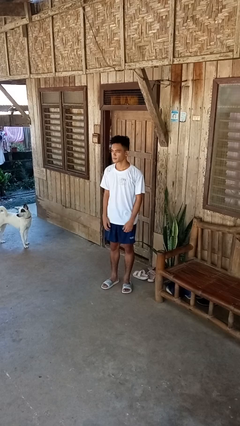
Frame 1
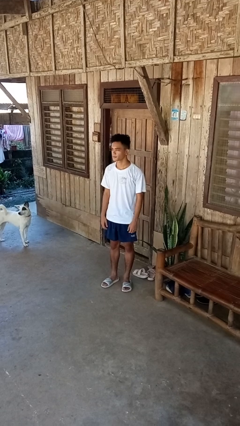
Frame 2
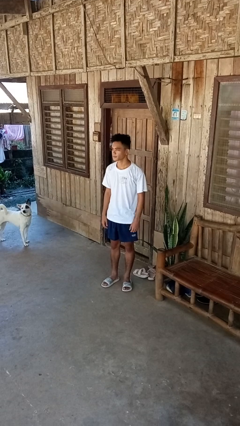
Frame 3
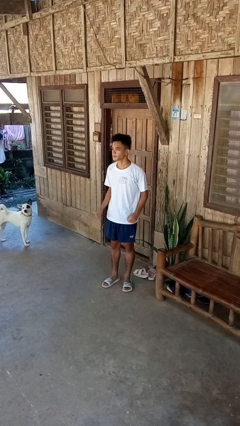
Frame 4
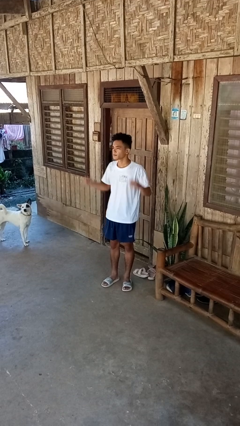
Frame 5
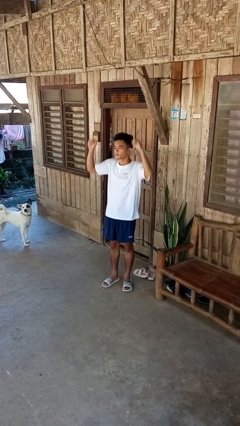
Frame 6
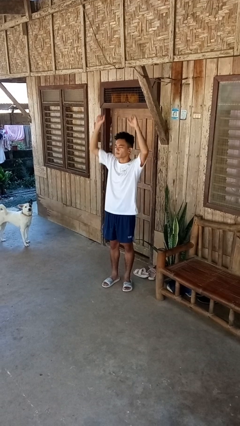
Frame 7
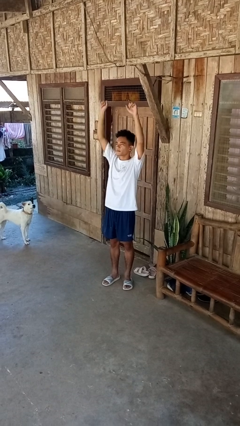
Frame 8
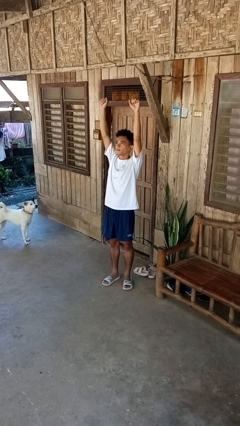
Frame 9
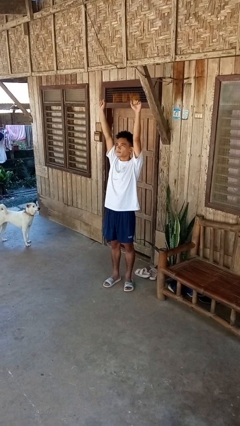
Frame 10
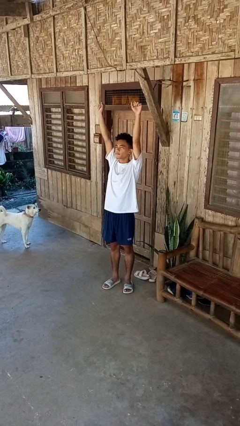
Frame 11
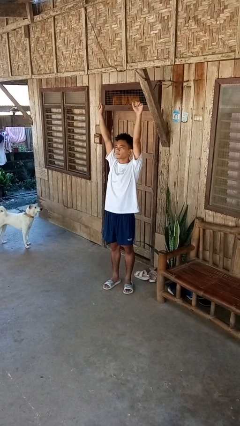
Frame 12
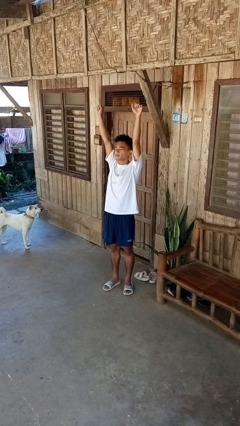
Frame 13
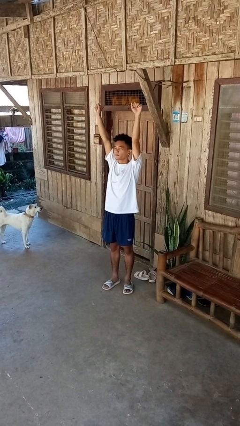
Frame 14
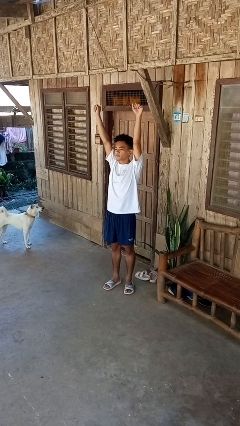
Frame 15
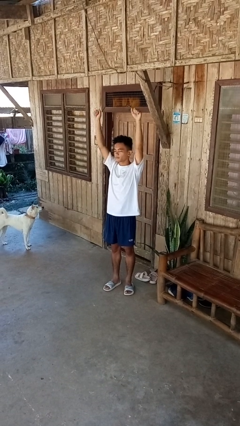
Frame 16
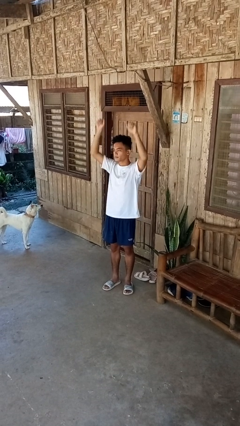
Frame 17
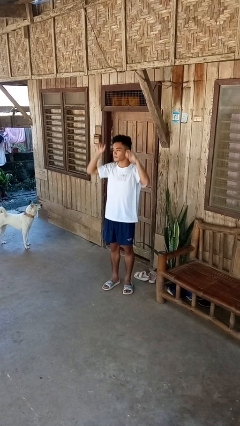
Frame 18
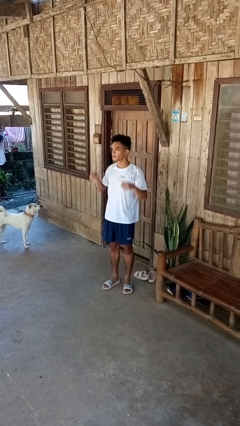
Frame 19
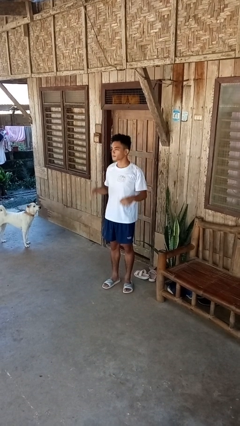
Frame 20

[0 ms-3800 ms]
person stretches arms over head

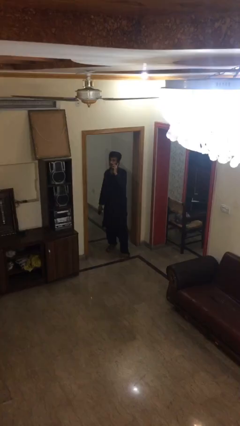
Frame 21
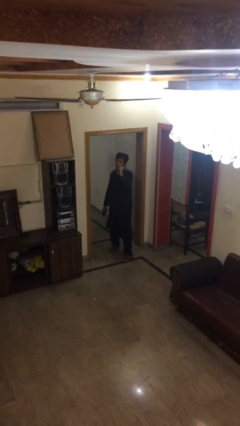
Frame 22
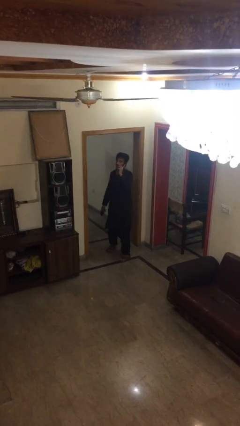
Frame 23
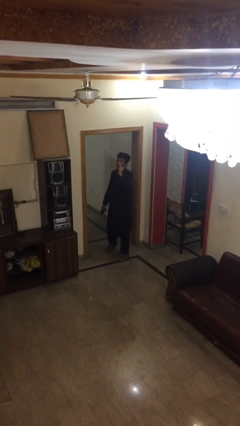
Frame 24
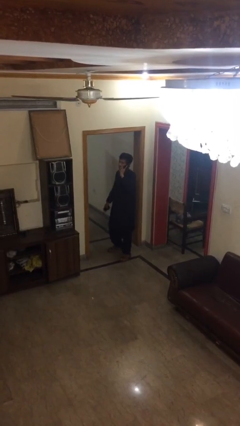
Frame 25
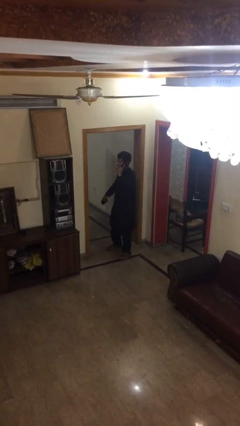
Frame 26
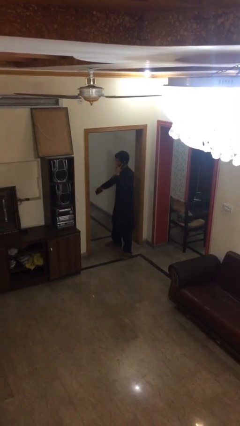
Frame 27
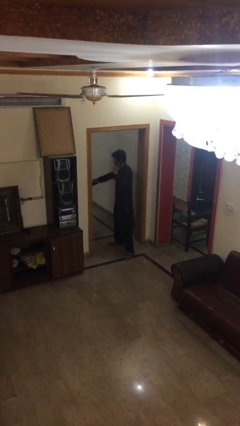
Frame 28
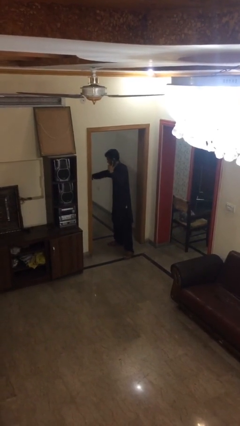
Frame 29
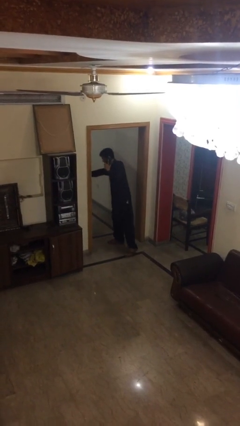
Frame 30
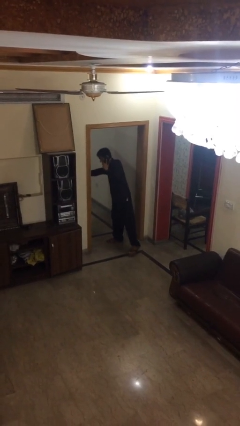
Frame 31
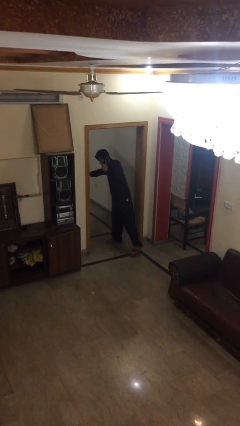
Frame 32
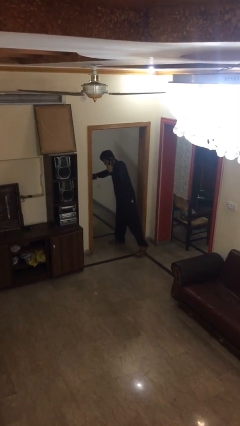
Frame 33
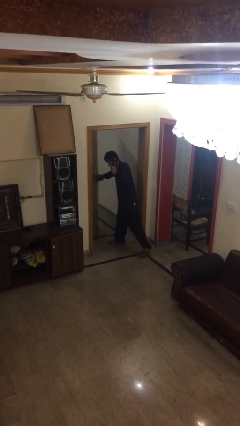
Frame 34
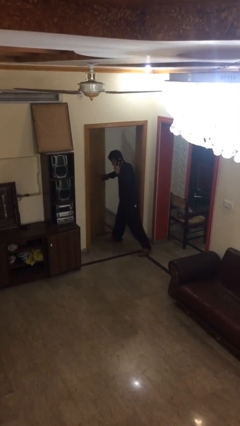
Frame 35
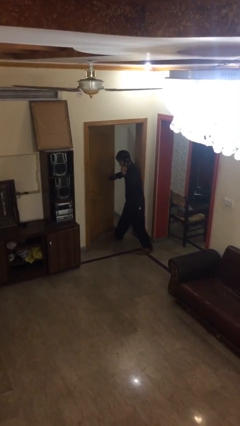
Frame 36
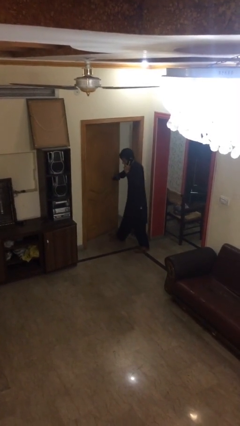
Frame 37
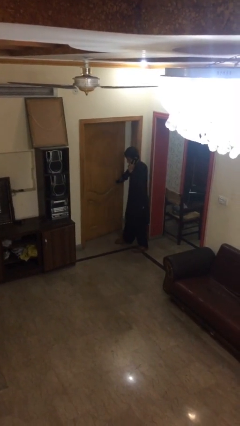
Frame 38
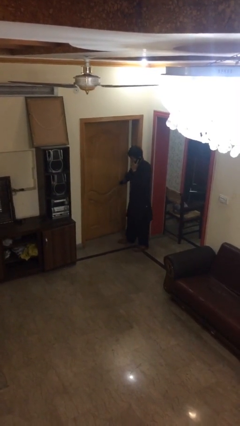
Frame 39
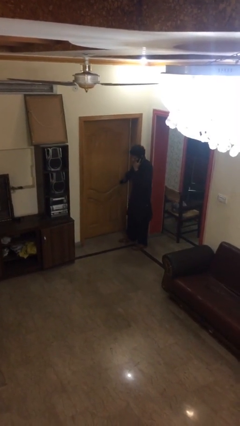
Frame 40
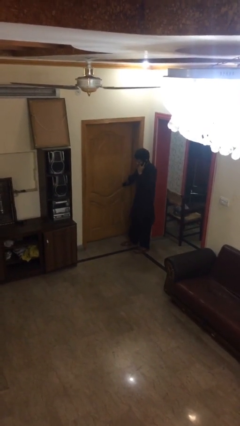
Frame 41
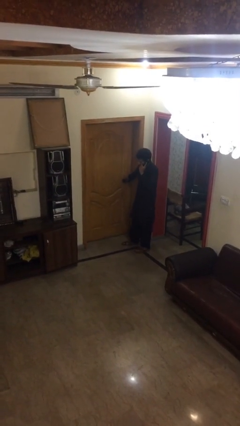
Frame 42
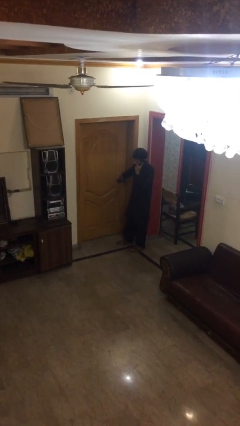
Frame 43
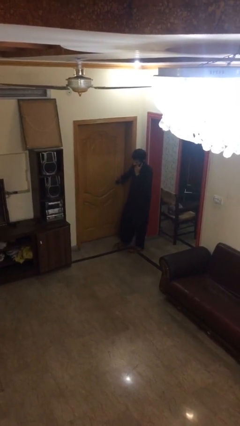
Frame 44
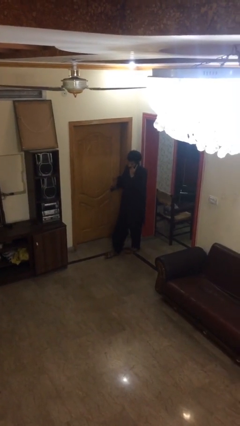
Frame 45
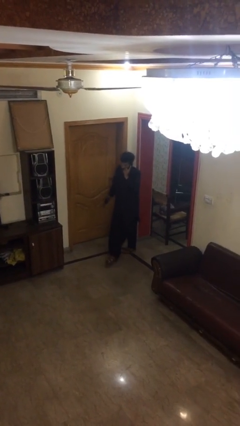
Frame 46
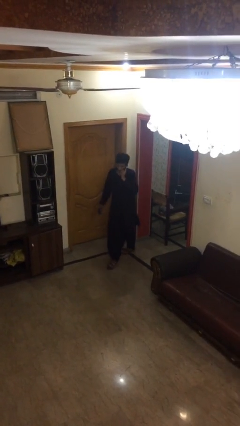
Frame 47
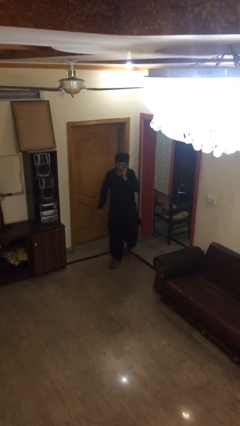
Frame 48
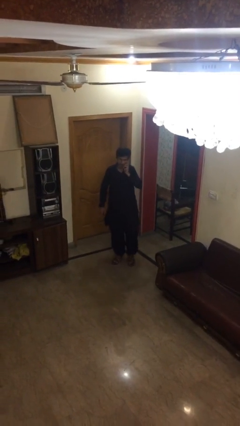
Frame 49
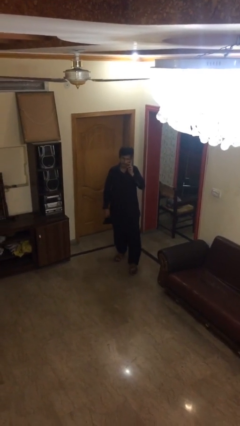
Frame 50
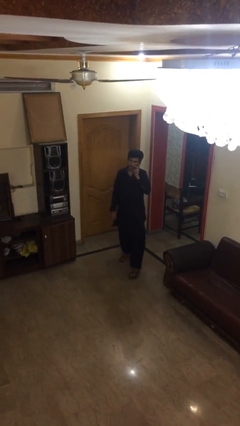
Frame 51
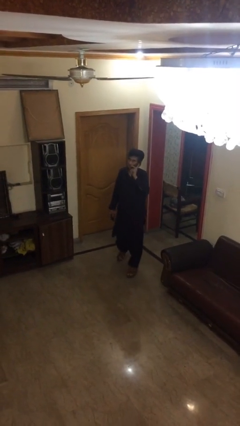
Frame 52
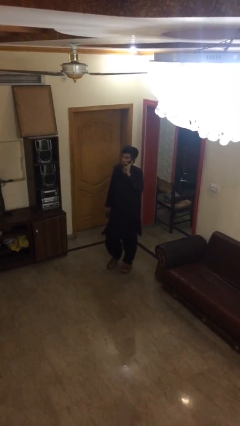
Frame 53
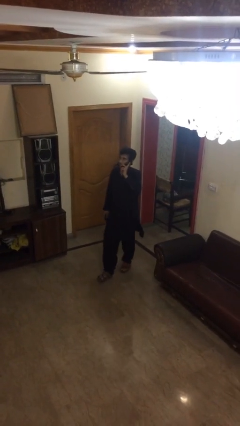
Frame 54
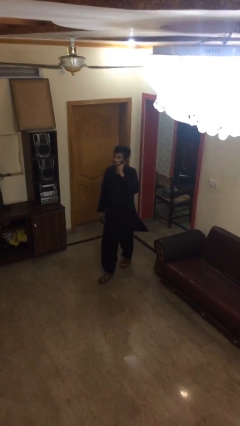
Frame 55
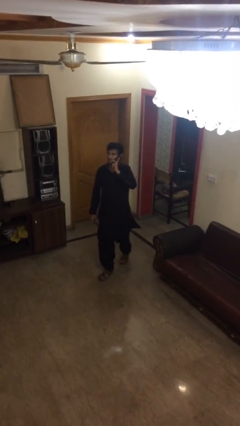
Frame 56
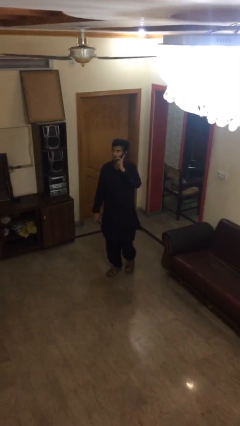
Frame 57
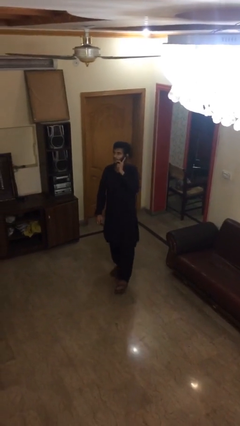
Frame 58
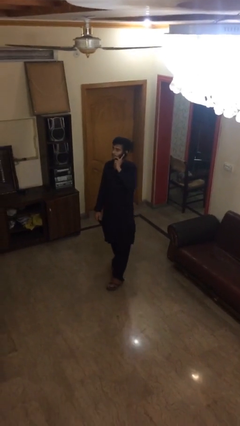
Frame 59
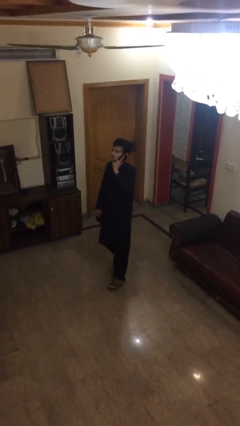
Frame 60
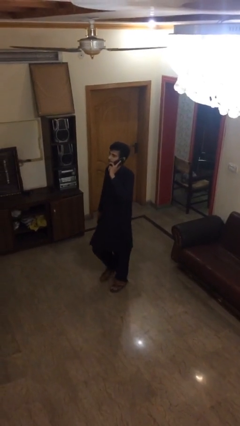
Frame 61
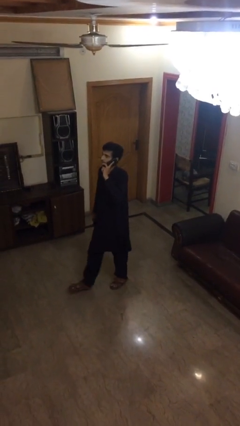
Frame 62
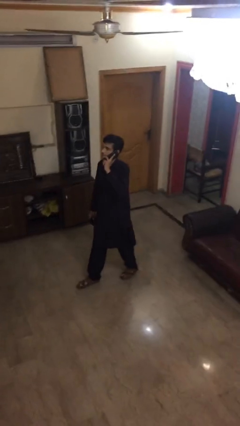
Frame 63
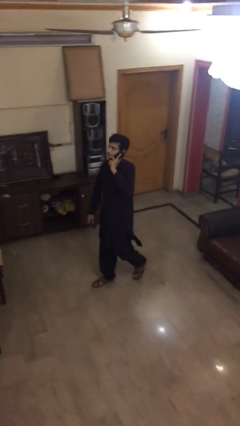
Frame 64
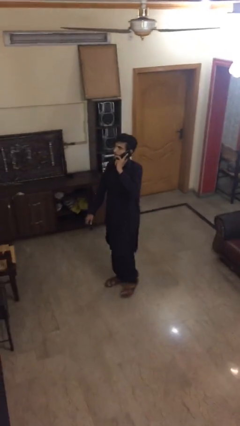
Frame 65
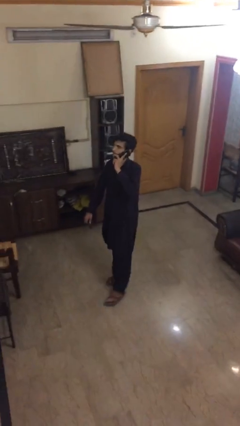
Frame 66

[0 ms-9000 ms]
person closes facility door

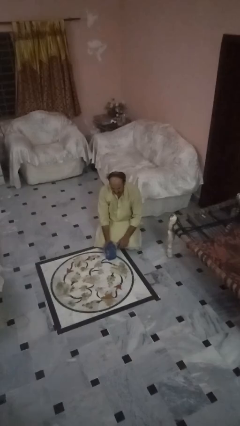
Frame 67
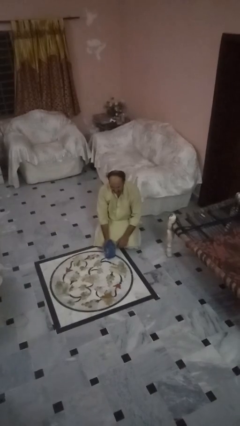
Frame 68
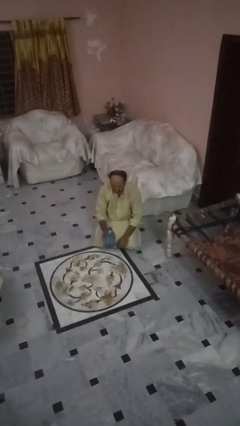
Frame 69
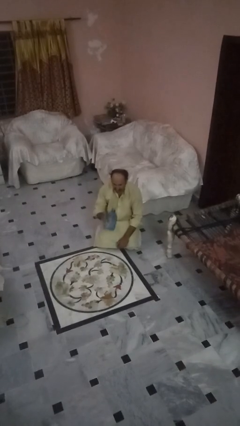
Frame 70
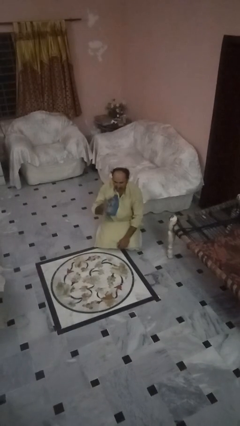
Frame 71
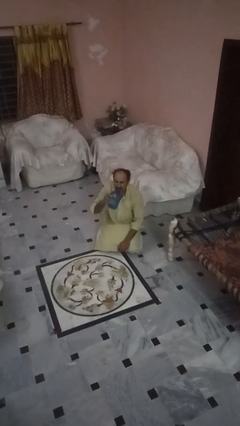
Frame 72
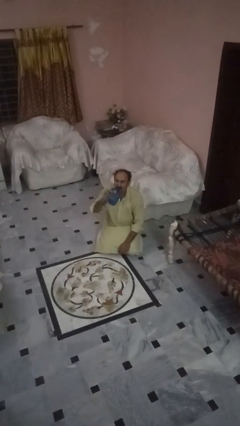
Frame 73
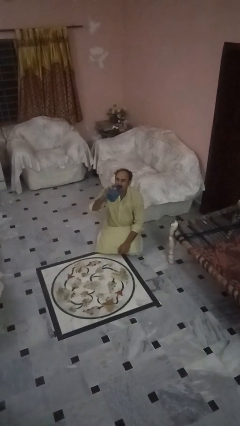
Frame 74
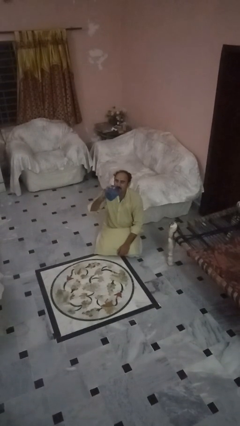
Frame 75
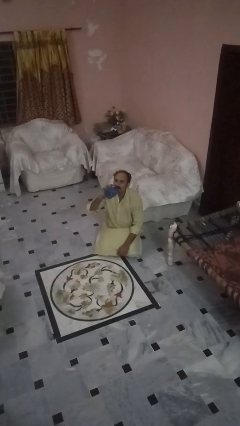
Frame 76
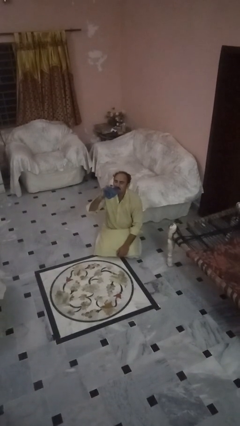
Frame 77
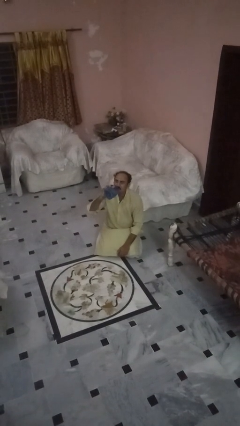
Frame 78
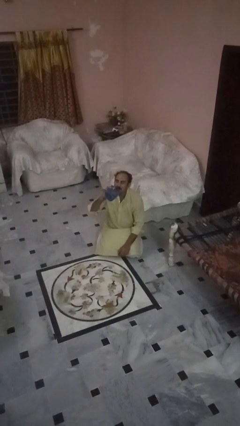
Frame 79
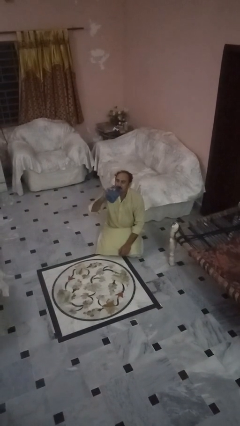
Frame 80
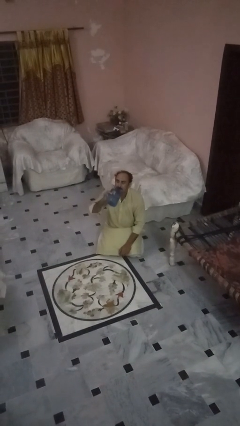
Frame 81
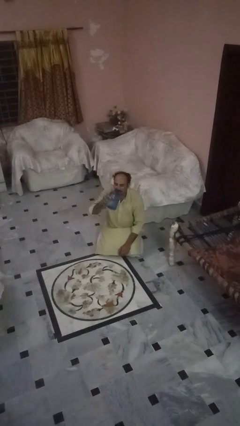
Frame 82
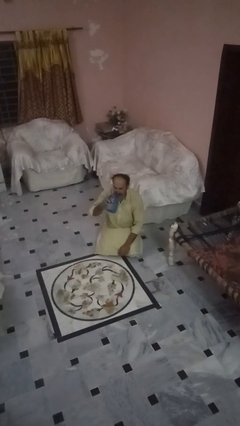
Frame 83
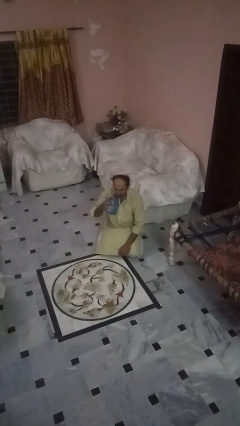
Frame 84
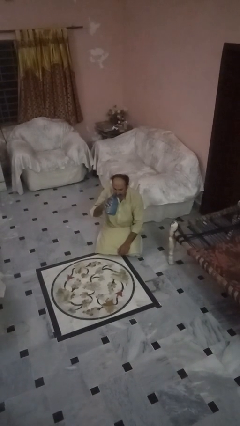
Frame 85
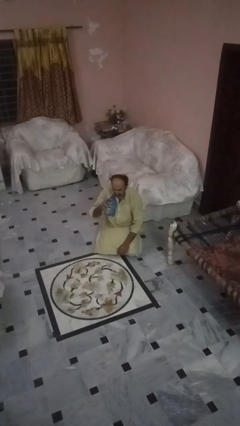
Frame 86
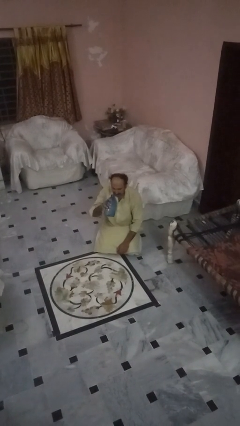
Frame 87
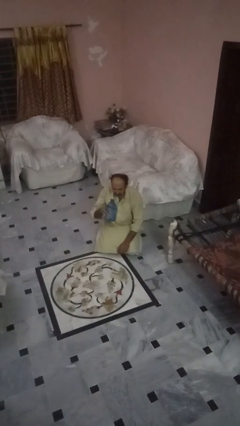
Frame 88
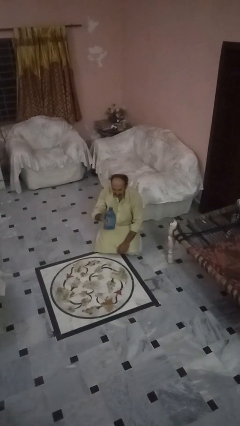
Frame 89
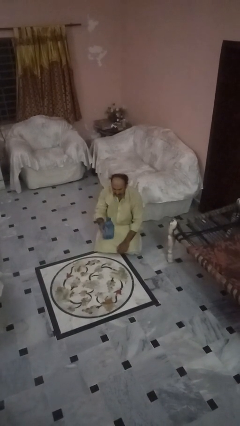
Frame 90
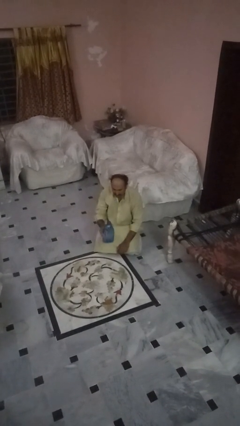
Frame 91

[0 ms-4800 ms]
person drinks from bottle

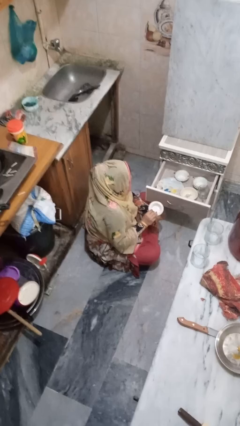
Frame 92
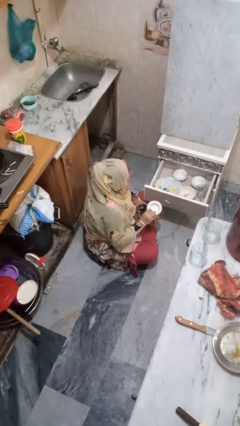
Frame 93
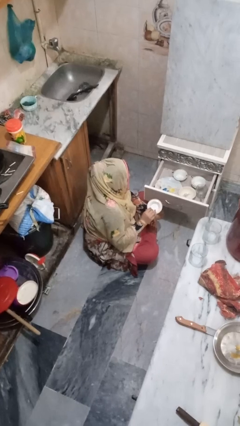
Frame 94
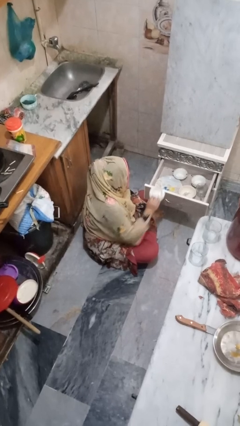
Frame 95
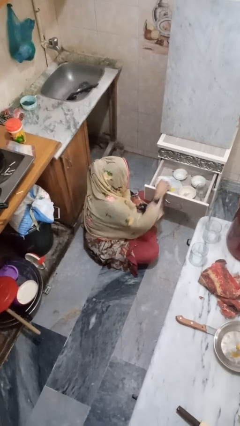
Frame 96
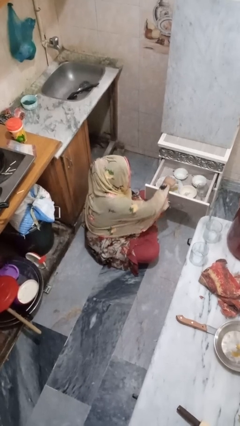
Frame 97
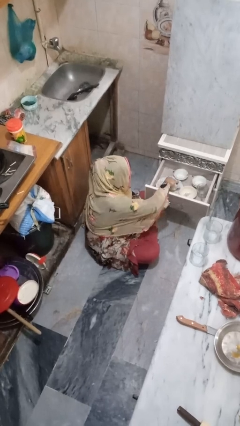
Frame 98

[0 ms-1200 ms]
person puts object into kitchen drawer
